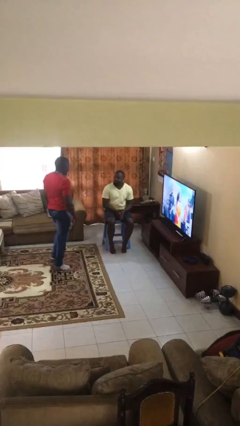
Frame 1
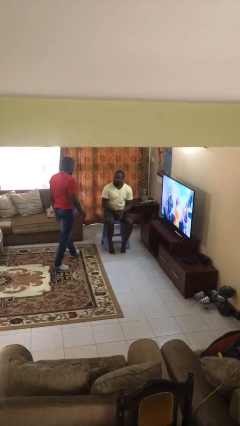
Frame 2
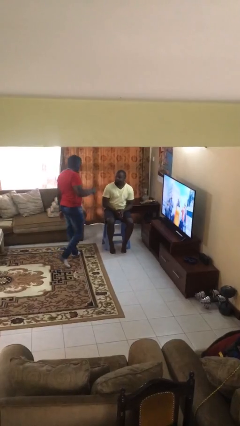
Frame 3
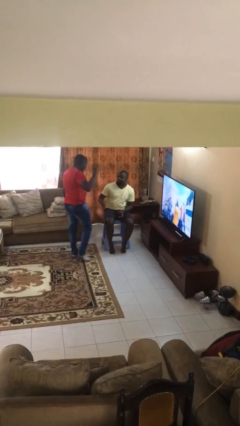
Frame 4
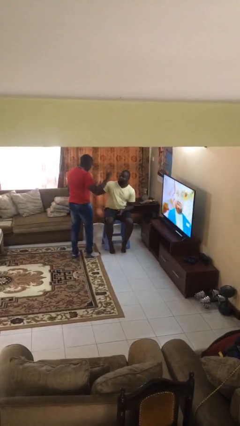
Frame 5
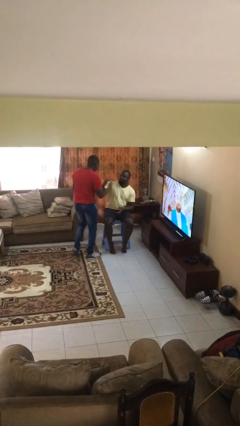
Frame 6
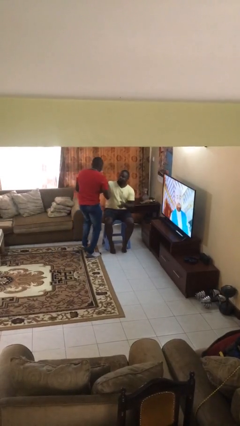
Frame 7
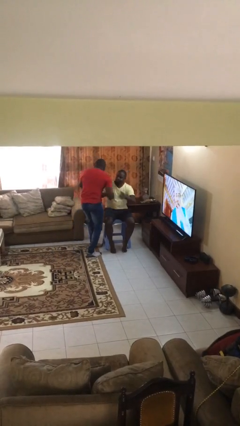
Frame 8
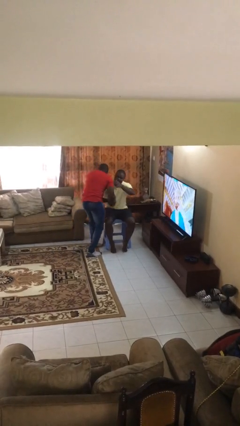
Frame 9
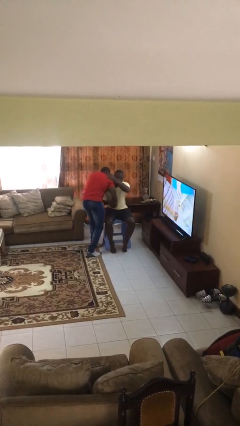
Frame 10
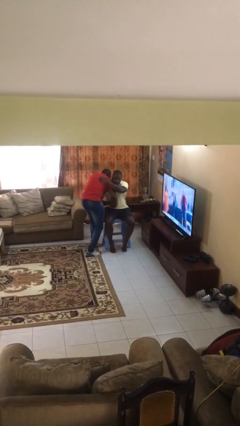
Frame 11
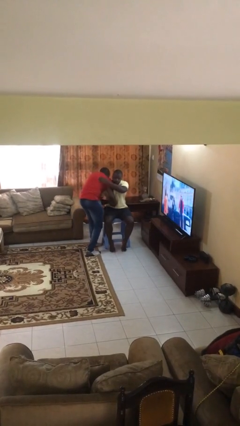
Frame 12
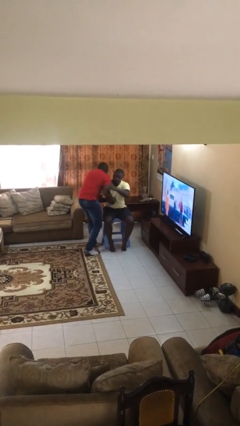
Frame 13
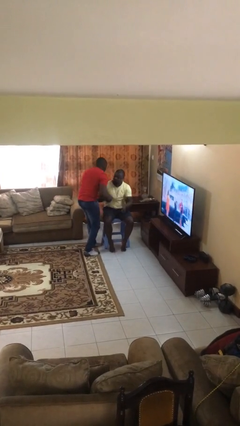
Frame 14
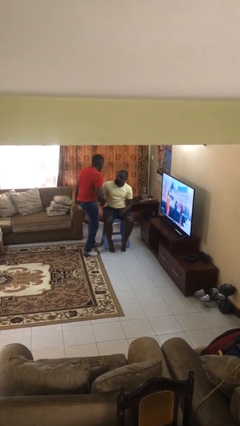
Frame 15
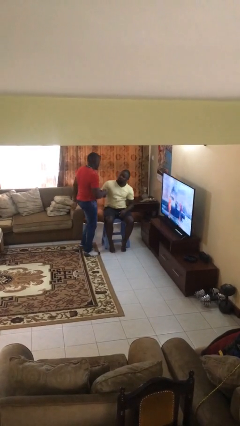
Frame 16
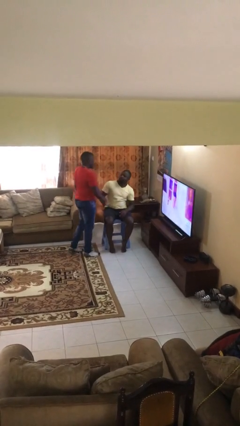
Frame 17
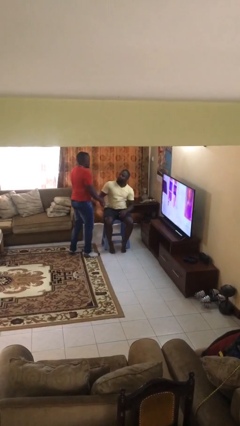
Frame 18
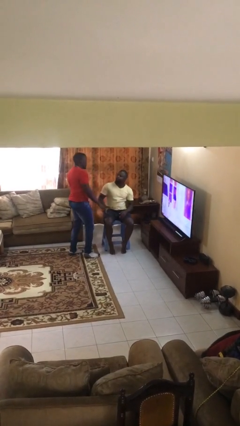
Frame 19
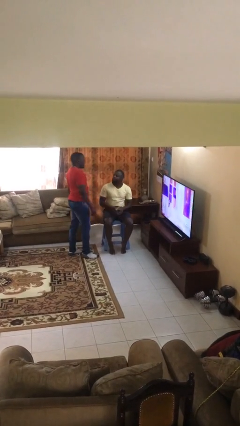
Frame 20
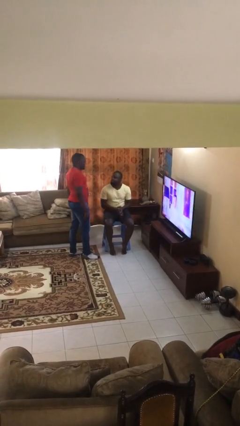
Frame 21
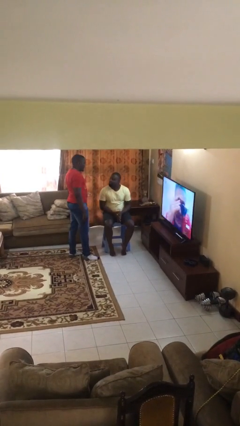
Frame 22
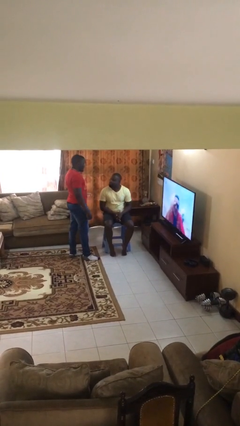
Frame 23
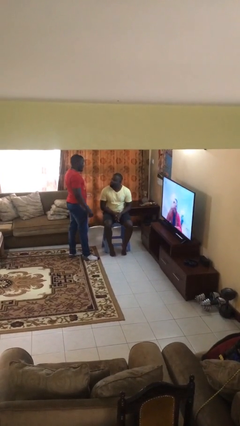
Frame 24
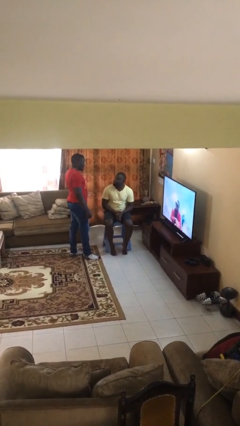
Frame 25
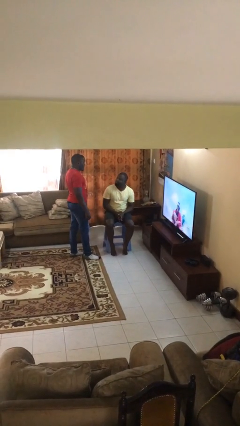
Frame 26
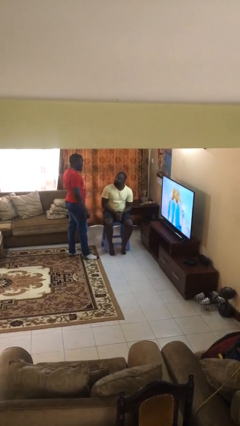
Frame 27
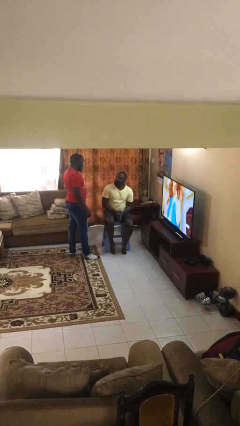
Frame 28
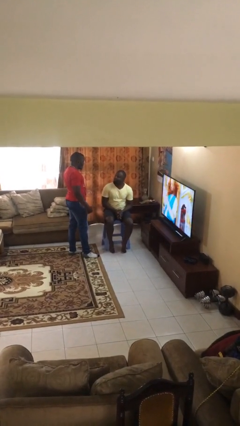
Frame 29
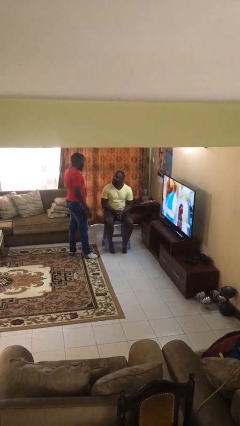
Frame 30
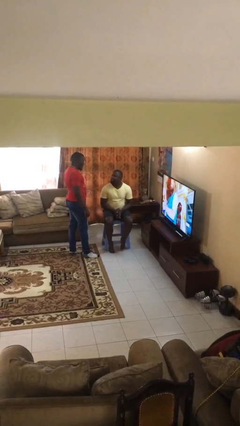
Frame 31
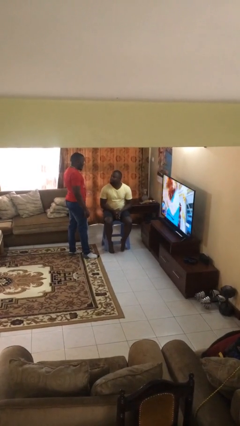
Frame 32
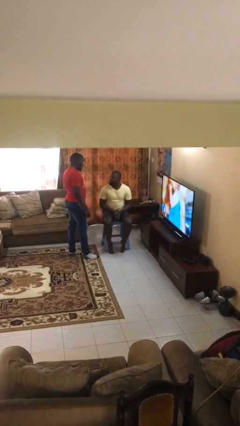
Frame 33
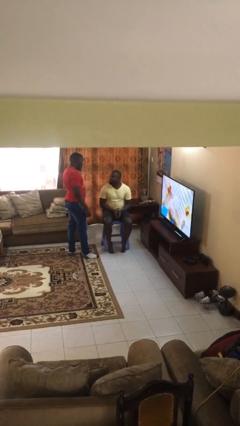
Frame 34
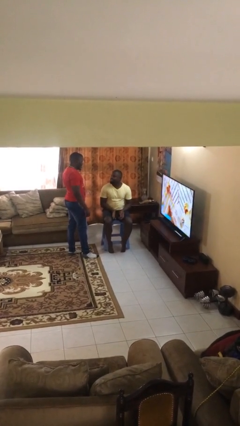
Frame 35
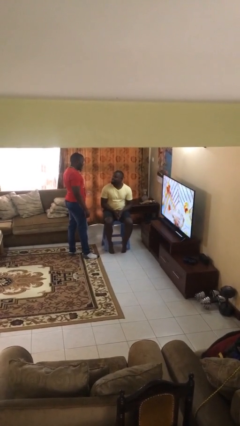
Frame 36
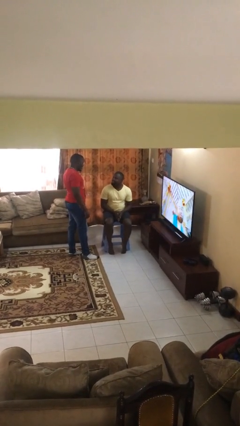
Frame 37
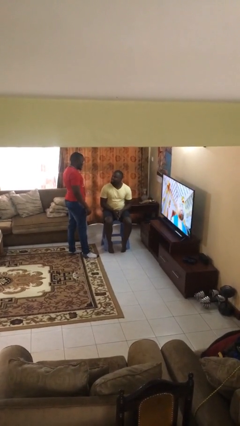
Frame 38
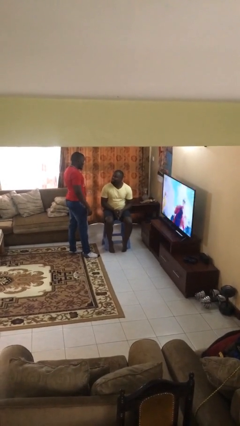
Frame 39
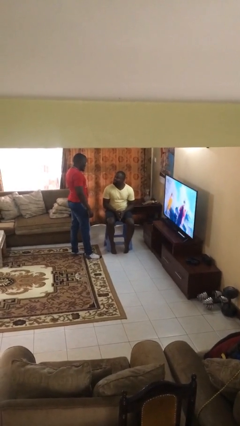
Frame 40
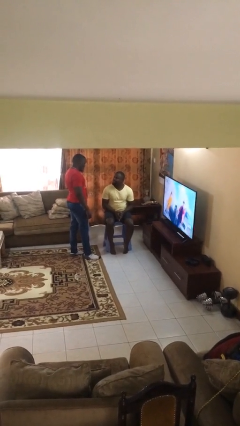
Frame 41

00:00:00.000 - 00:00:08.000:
person embraces person

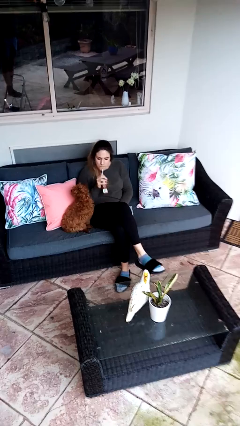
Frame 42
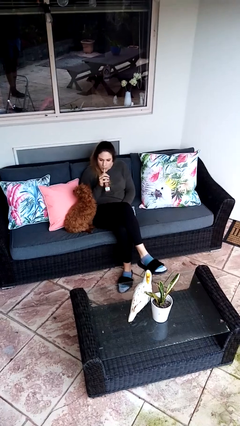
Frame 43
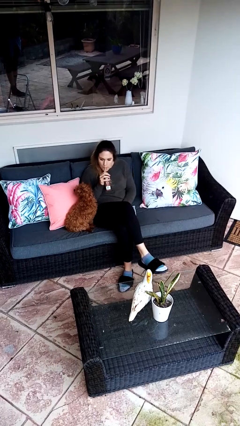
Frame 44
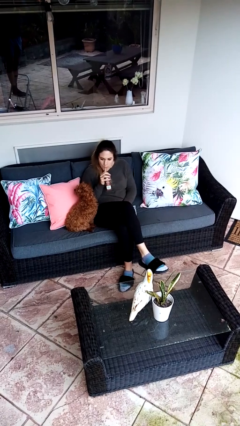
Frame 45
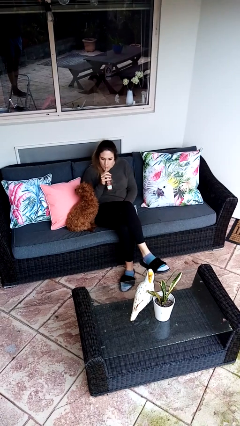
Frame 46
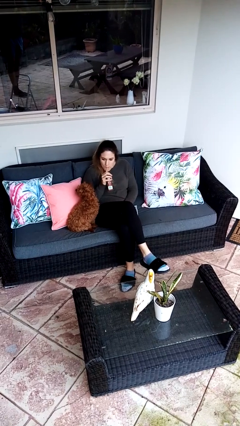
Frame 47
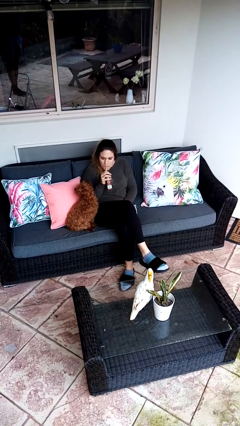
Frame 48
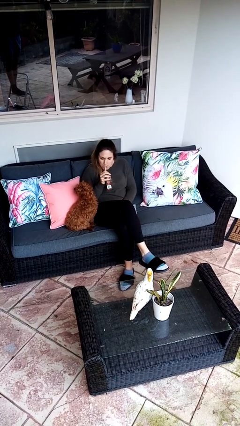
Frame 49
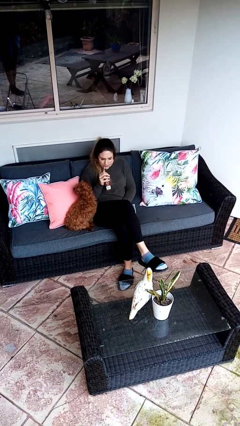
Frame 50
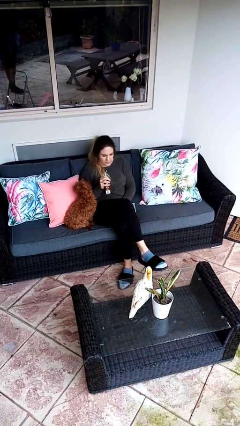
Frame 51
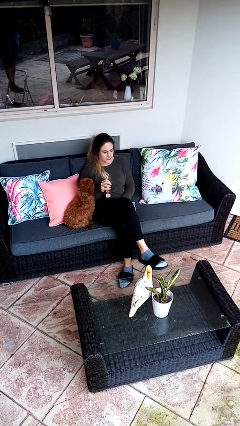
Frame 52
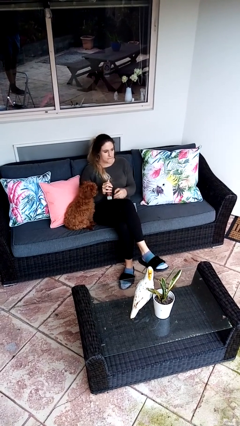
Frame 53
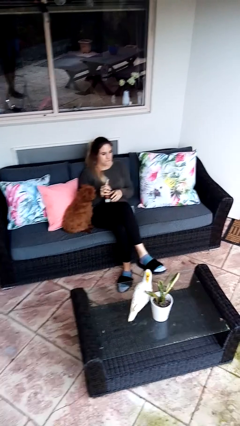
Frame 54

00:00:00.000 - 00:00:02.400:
person drinks from straw

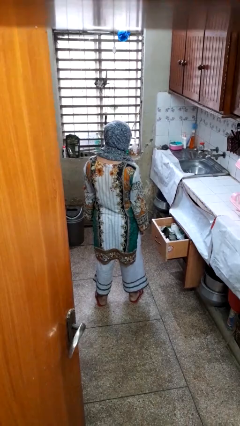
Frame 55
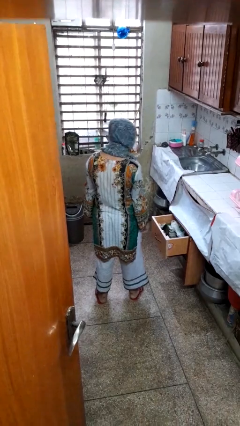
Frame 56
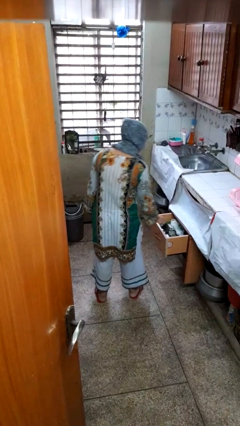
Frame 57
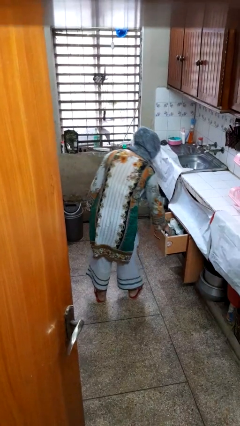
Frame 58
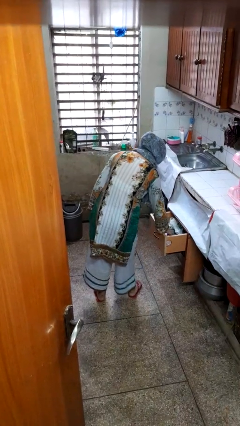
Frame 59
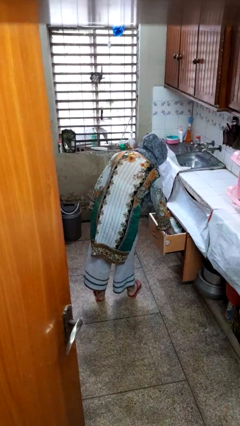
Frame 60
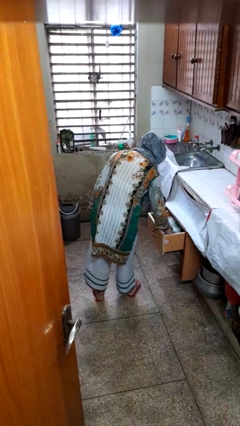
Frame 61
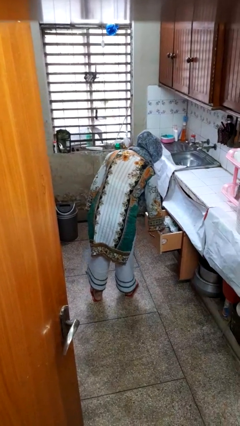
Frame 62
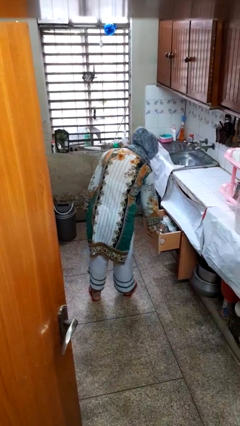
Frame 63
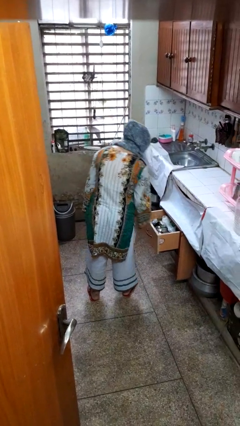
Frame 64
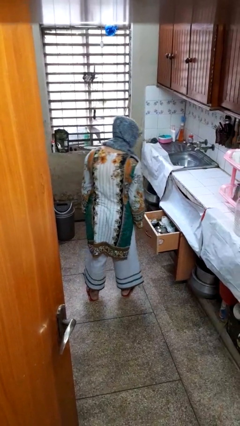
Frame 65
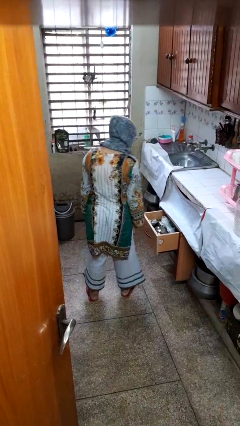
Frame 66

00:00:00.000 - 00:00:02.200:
person searches in kitchen drawer

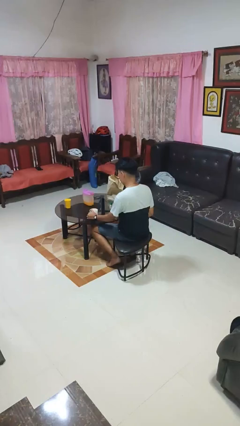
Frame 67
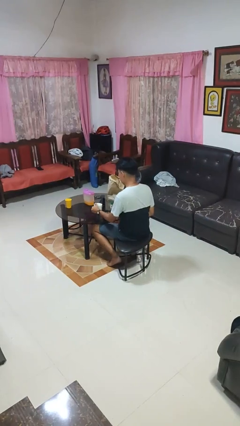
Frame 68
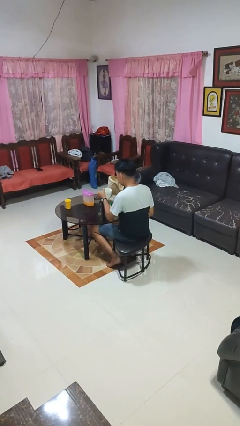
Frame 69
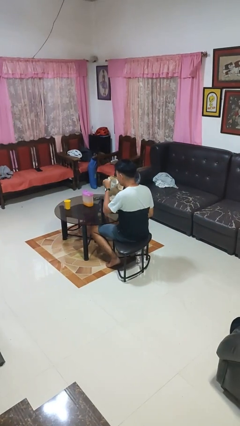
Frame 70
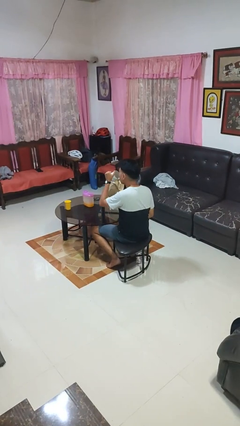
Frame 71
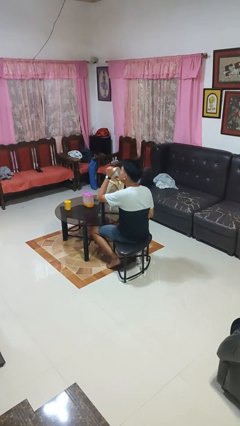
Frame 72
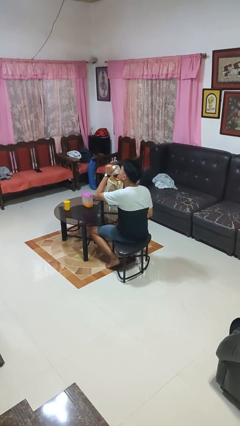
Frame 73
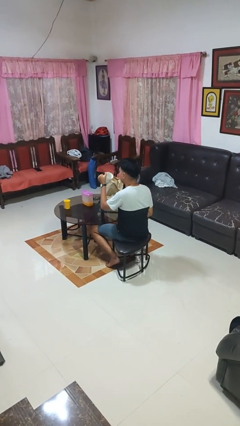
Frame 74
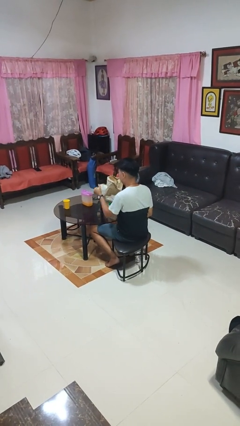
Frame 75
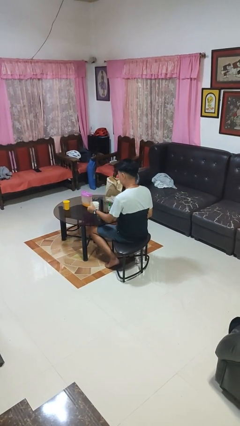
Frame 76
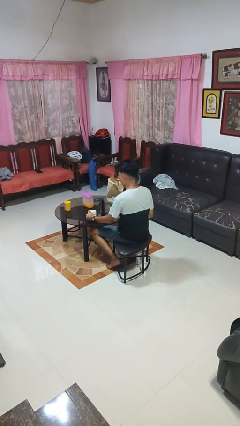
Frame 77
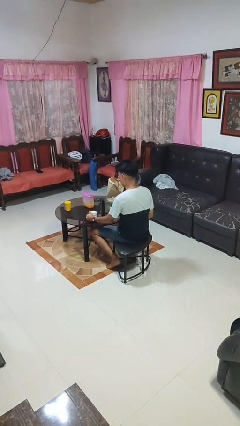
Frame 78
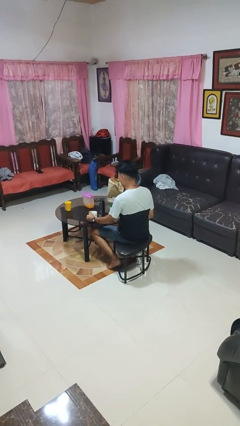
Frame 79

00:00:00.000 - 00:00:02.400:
person drinks from mug

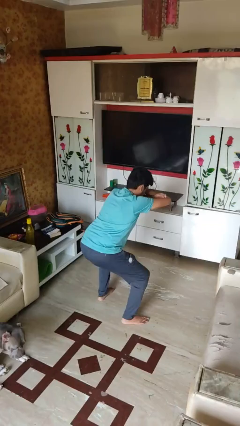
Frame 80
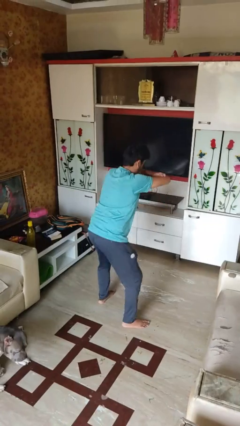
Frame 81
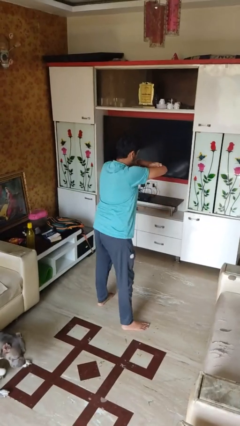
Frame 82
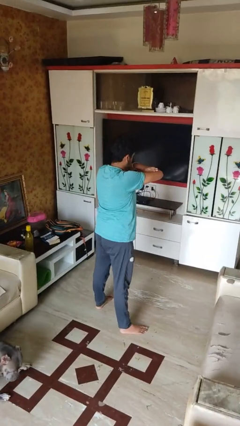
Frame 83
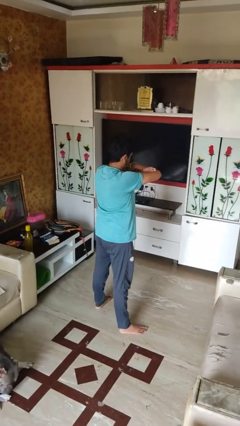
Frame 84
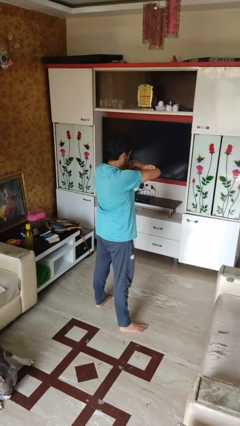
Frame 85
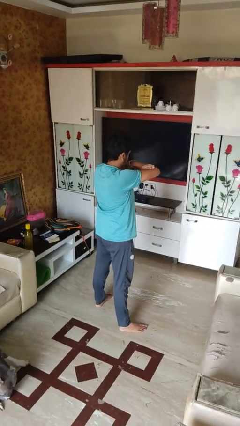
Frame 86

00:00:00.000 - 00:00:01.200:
person stands up

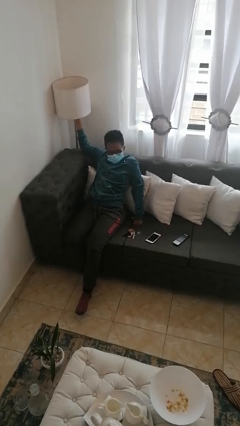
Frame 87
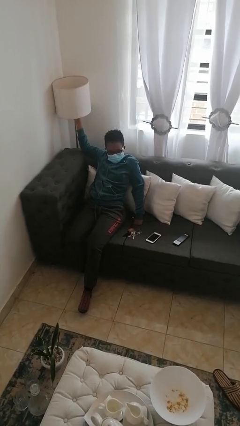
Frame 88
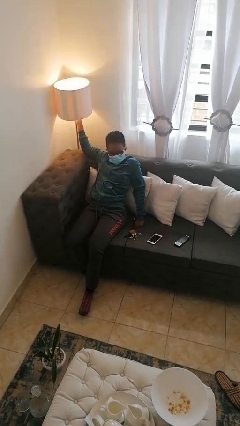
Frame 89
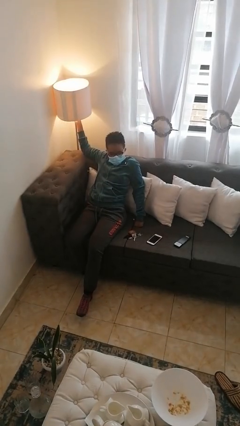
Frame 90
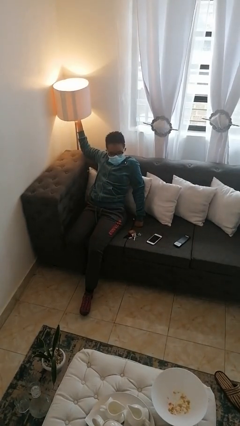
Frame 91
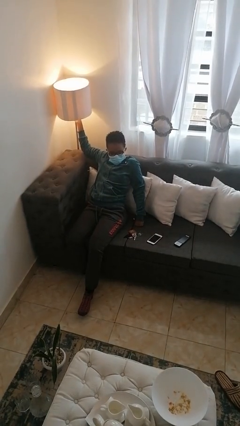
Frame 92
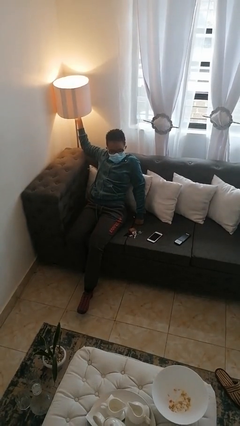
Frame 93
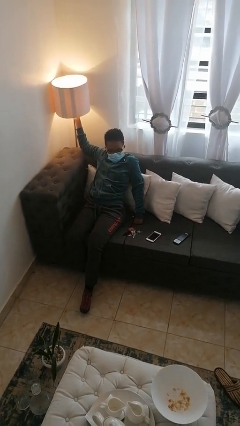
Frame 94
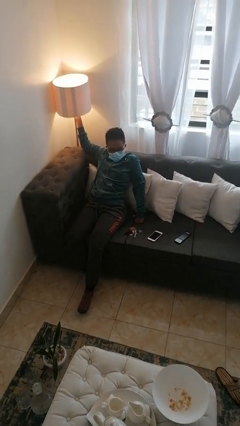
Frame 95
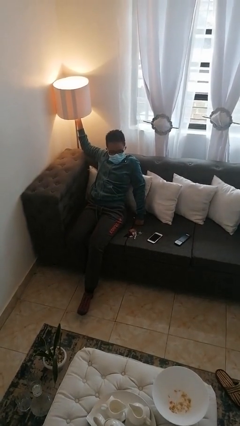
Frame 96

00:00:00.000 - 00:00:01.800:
person turns on lamp
